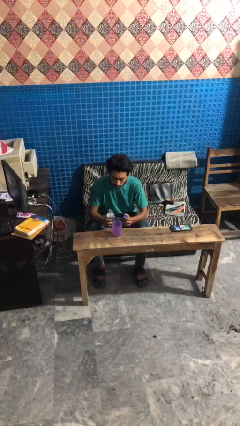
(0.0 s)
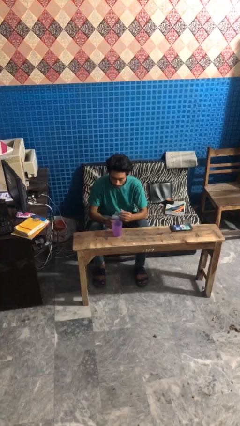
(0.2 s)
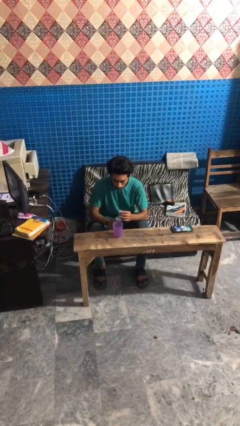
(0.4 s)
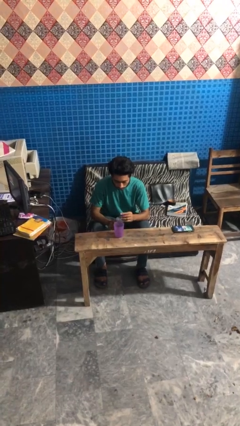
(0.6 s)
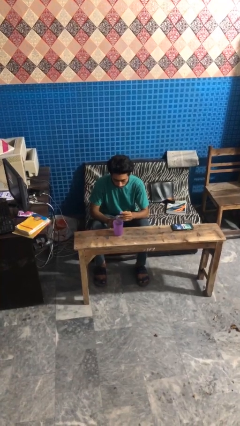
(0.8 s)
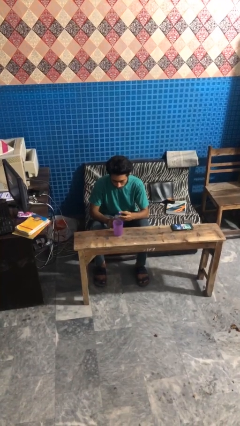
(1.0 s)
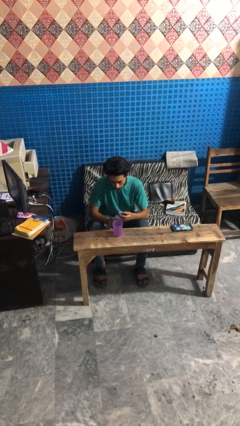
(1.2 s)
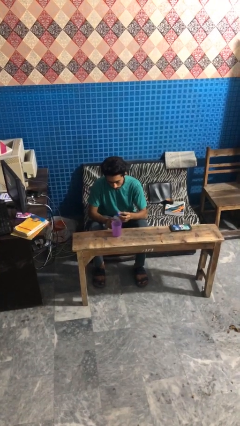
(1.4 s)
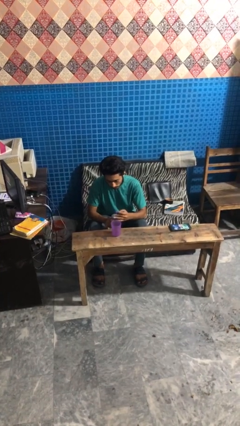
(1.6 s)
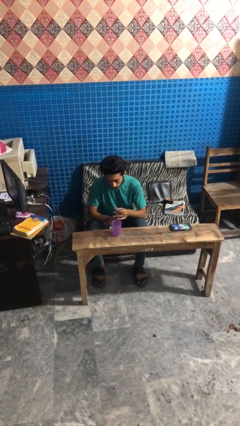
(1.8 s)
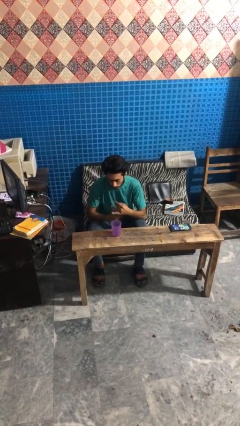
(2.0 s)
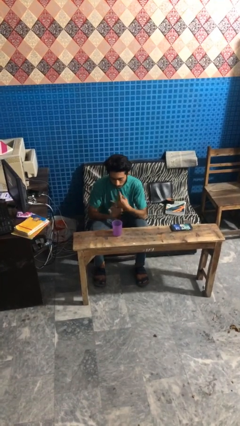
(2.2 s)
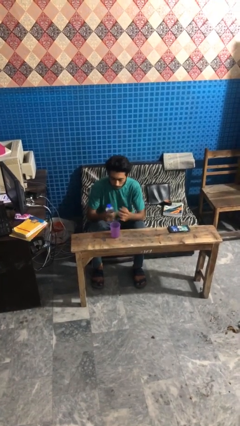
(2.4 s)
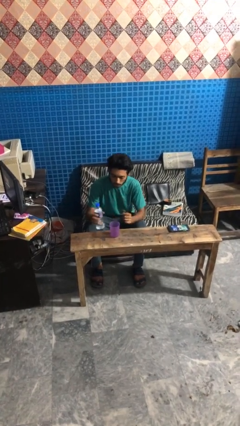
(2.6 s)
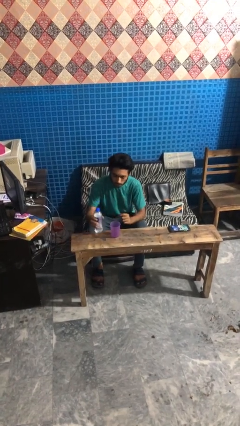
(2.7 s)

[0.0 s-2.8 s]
person screws lid to bottle

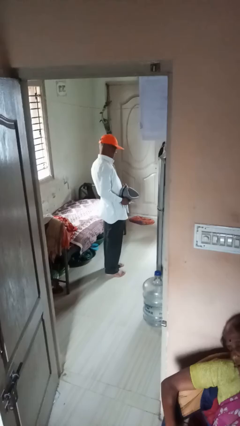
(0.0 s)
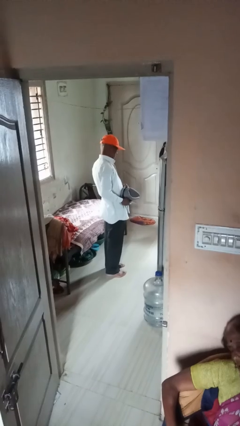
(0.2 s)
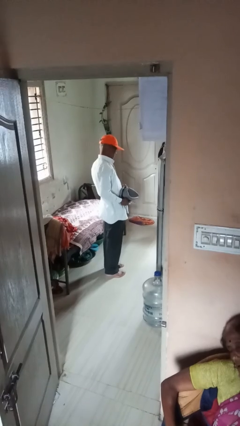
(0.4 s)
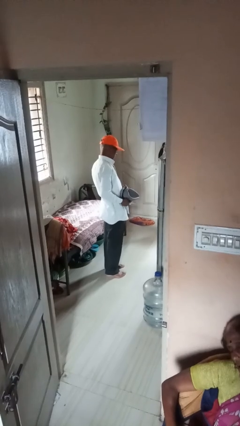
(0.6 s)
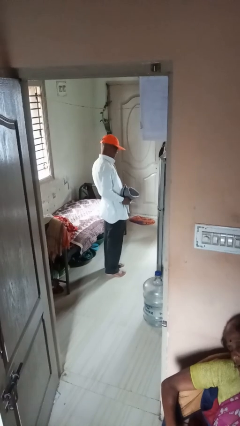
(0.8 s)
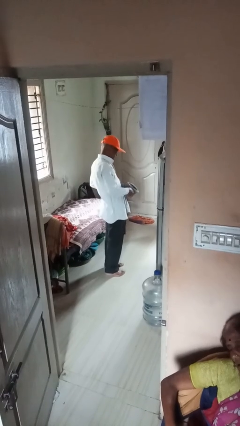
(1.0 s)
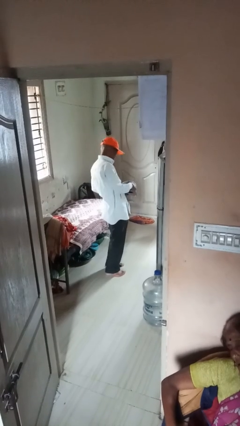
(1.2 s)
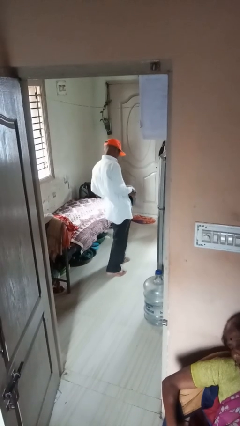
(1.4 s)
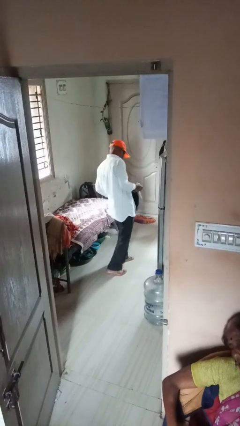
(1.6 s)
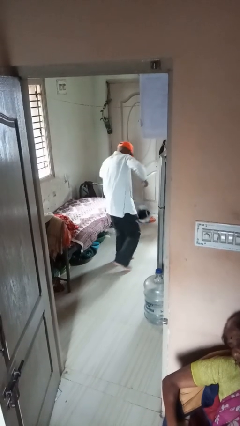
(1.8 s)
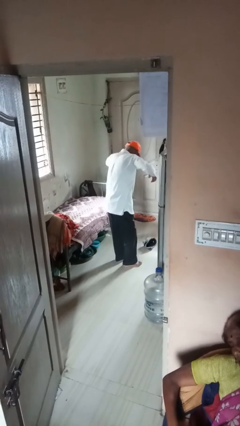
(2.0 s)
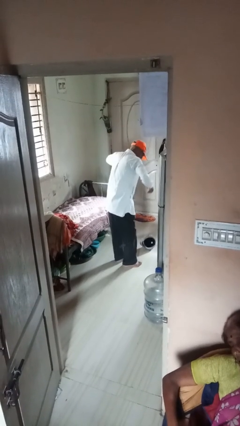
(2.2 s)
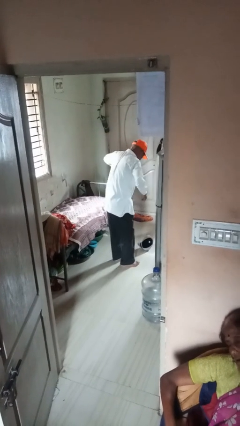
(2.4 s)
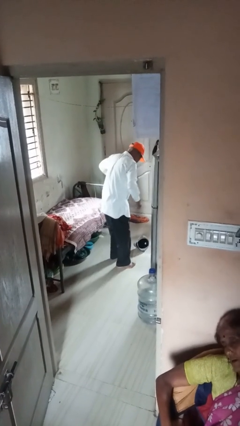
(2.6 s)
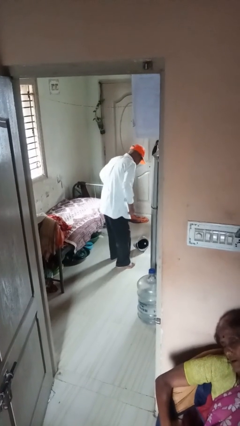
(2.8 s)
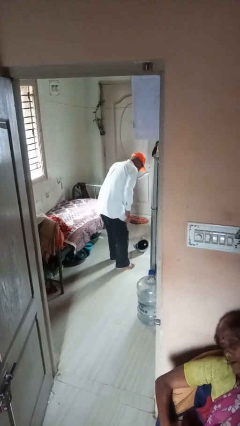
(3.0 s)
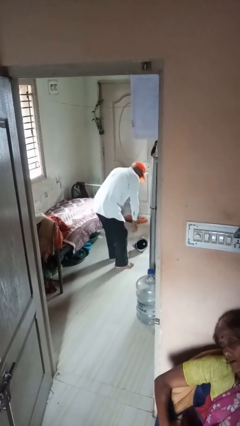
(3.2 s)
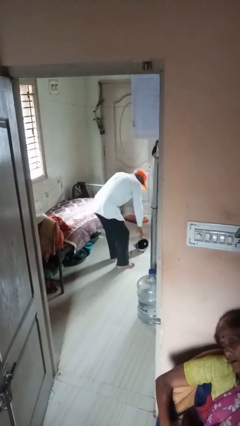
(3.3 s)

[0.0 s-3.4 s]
person drops object

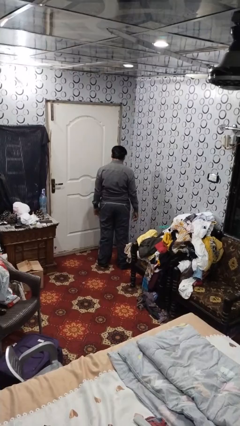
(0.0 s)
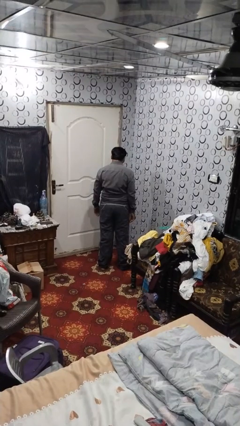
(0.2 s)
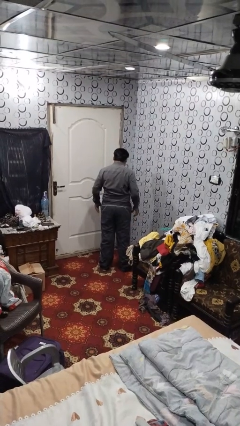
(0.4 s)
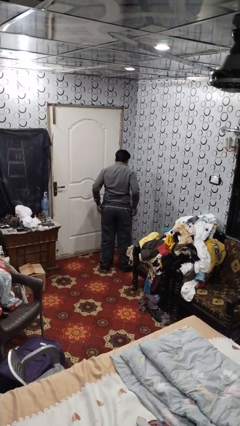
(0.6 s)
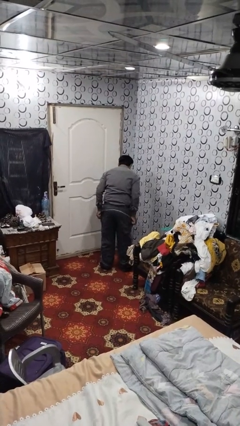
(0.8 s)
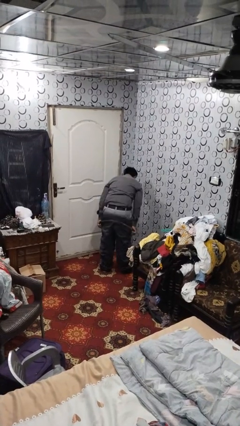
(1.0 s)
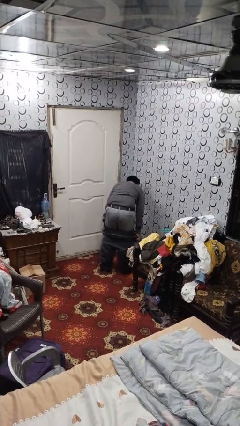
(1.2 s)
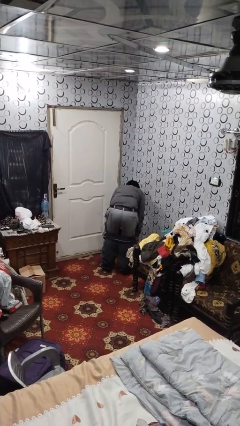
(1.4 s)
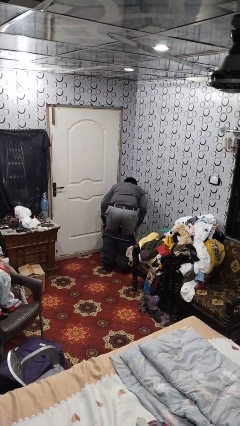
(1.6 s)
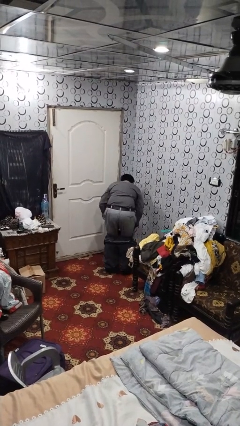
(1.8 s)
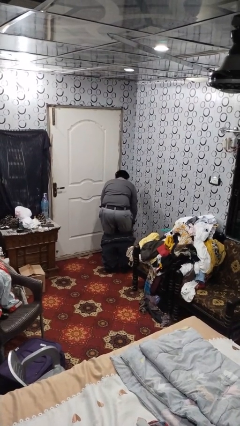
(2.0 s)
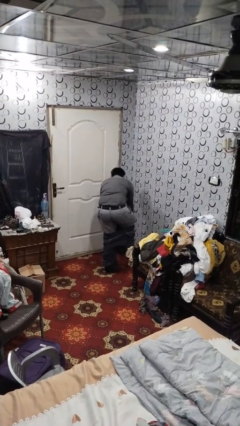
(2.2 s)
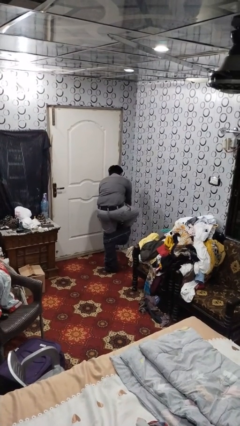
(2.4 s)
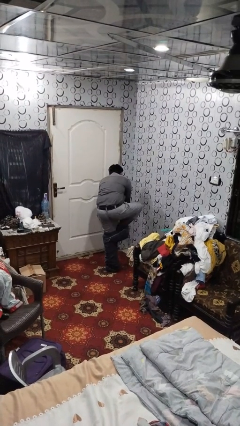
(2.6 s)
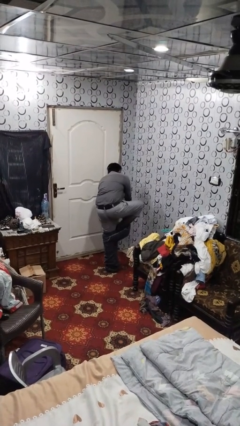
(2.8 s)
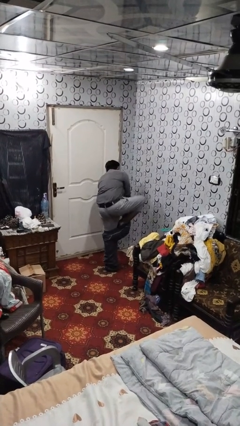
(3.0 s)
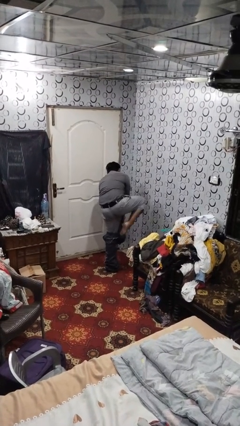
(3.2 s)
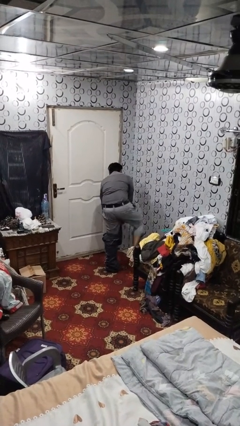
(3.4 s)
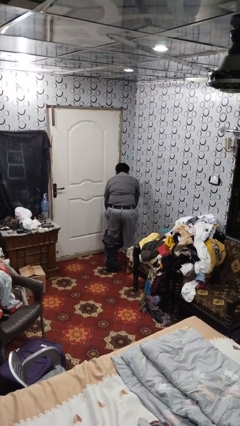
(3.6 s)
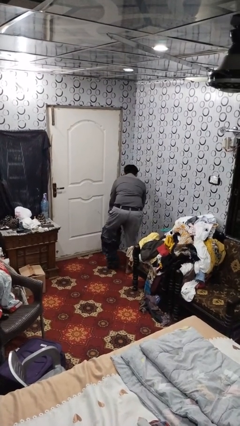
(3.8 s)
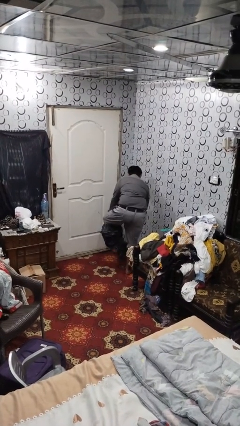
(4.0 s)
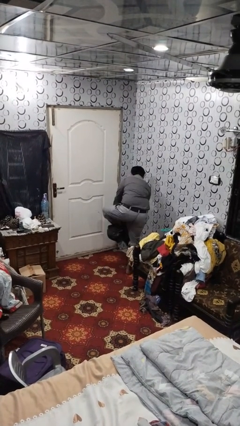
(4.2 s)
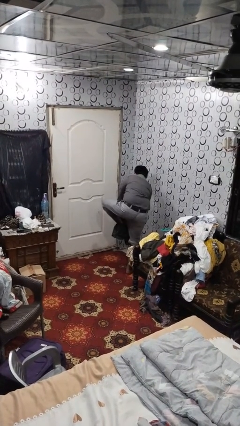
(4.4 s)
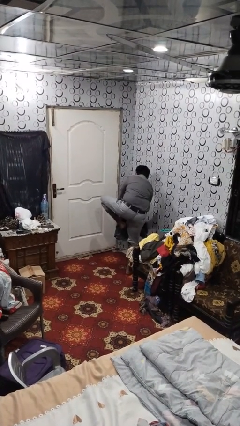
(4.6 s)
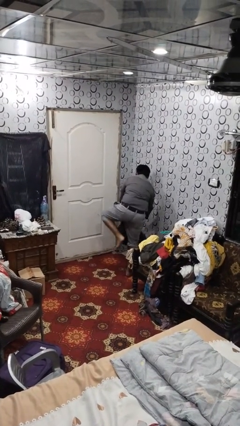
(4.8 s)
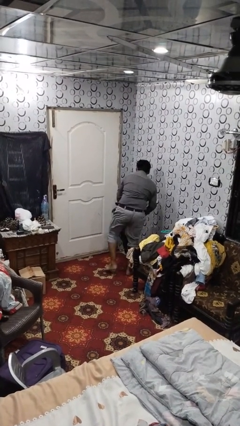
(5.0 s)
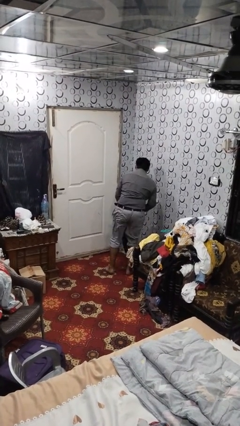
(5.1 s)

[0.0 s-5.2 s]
person takes off pants

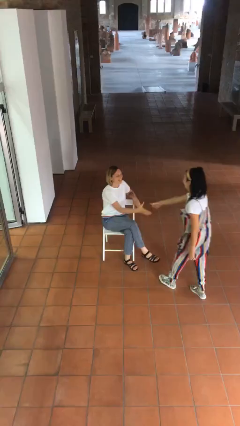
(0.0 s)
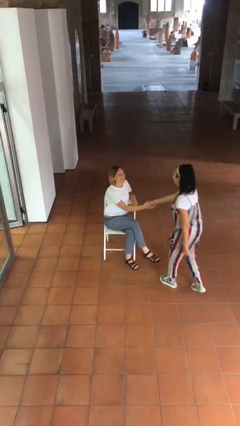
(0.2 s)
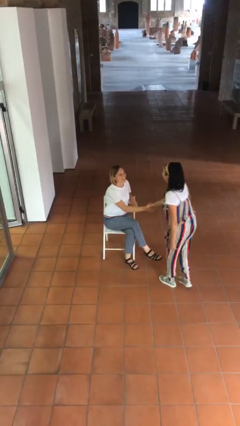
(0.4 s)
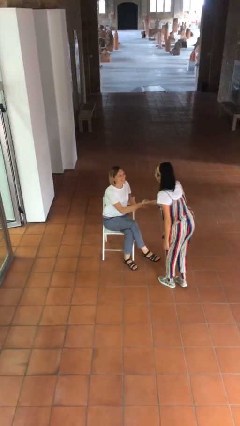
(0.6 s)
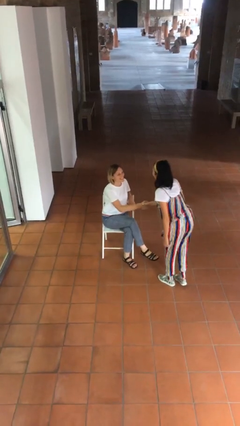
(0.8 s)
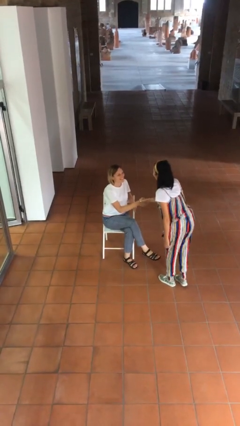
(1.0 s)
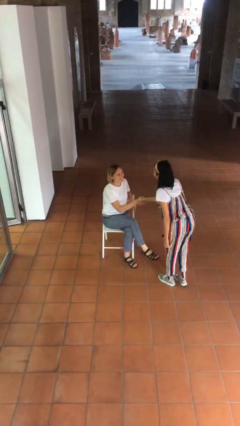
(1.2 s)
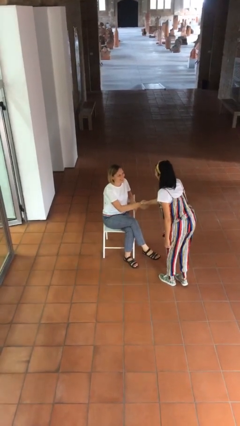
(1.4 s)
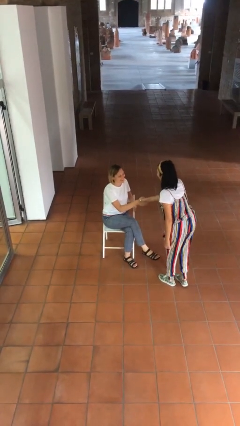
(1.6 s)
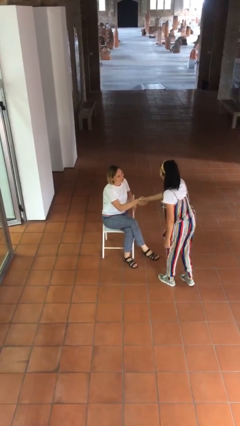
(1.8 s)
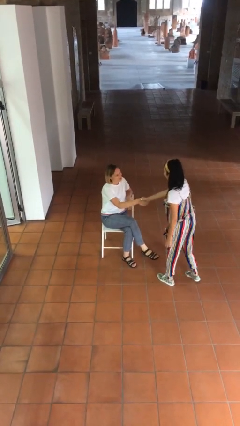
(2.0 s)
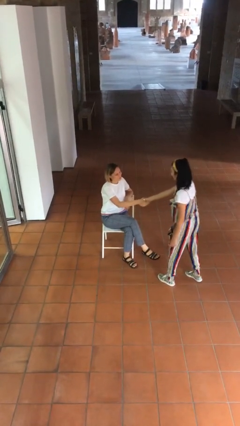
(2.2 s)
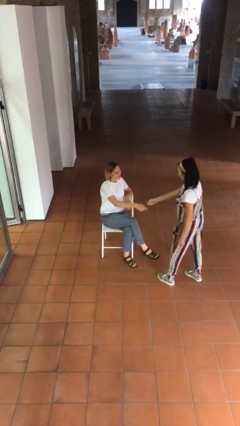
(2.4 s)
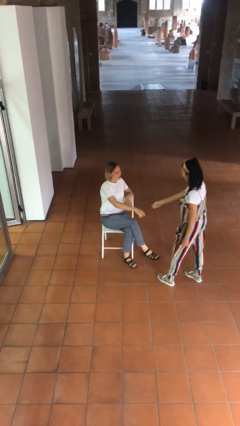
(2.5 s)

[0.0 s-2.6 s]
person shakes hand

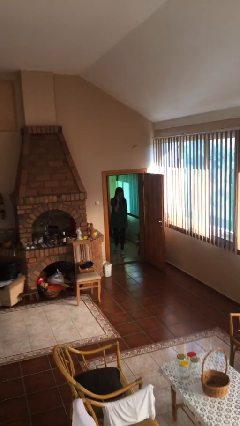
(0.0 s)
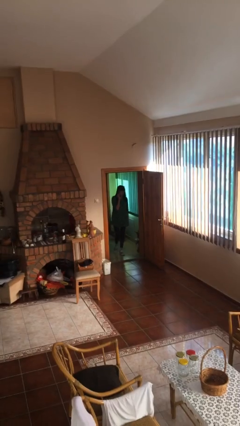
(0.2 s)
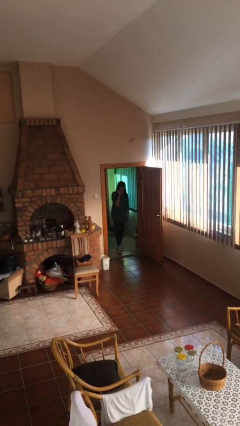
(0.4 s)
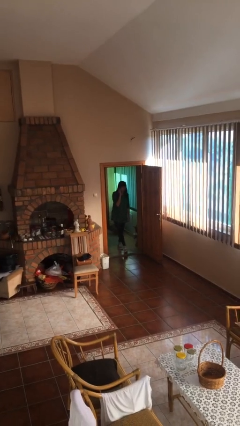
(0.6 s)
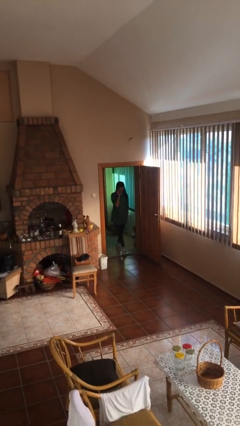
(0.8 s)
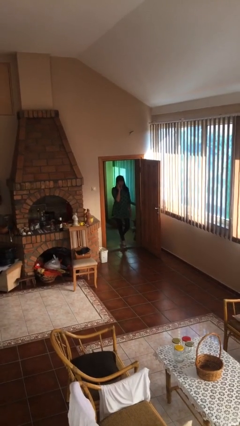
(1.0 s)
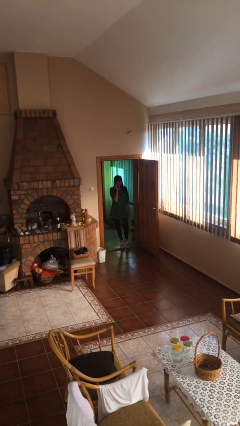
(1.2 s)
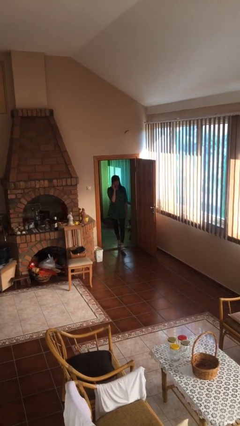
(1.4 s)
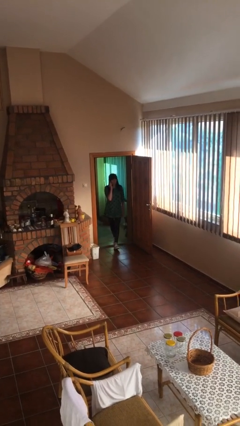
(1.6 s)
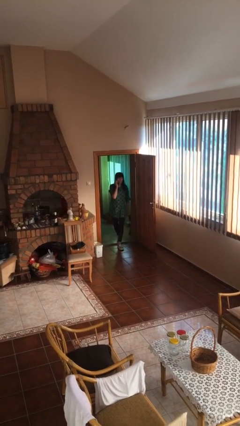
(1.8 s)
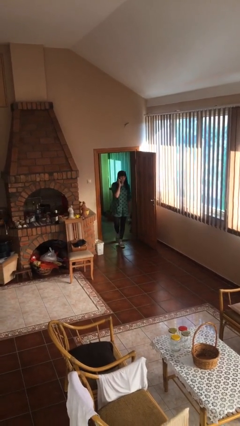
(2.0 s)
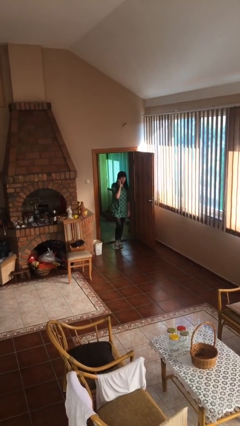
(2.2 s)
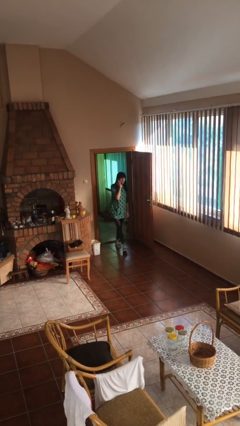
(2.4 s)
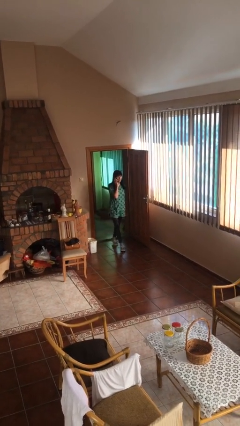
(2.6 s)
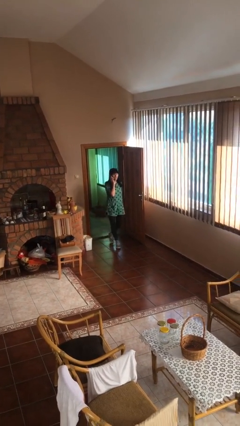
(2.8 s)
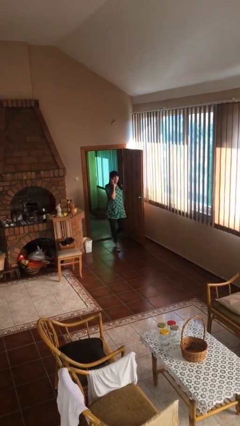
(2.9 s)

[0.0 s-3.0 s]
person enters scene through structure

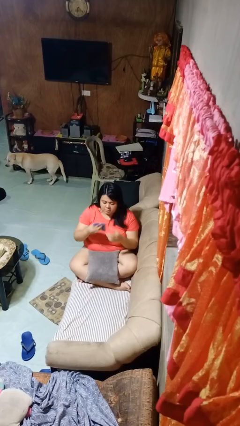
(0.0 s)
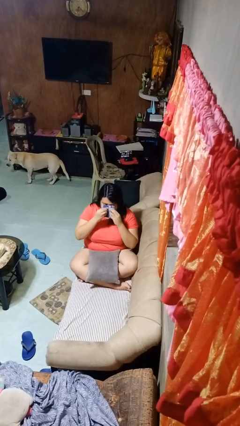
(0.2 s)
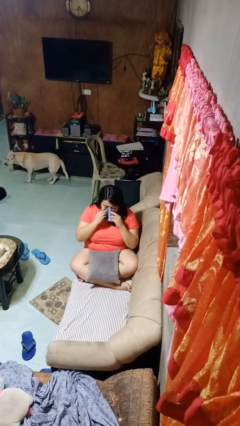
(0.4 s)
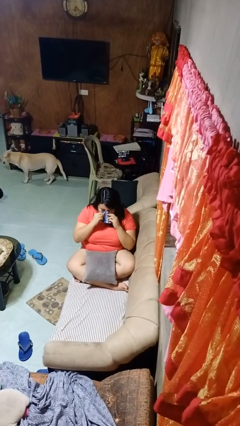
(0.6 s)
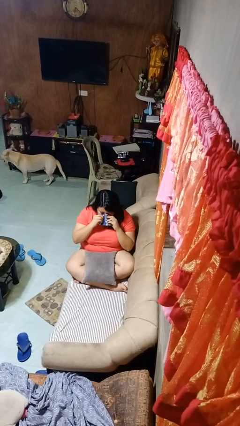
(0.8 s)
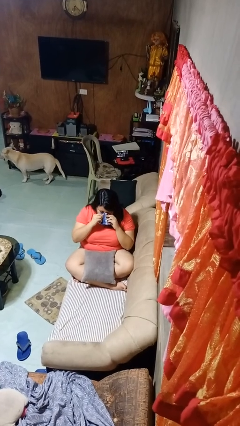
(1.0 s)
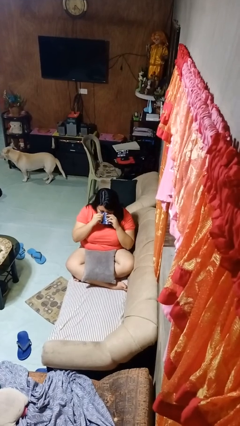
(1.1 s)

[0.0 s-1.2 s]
person blows nose
